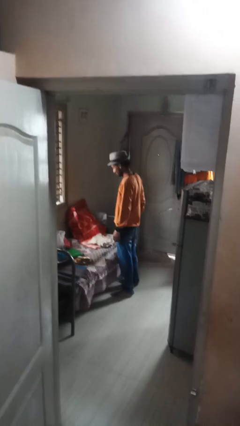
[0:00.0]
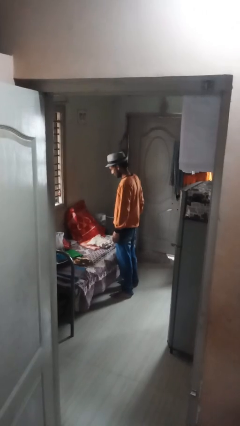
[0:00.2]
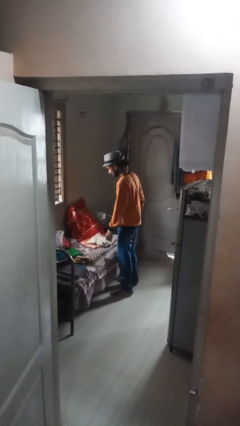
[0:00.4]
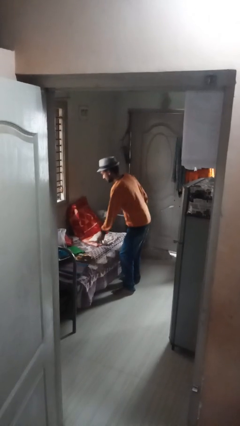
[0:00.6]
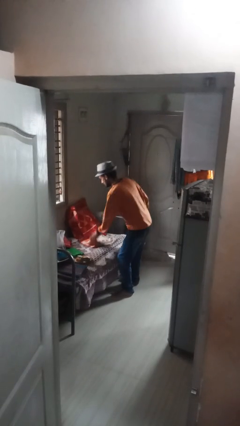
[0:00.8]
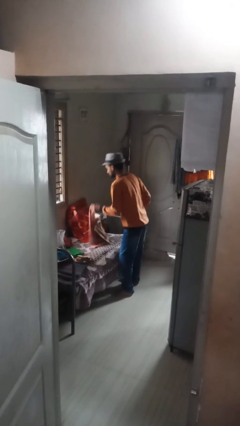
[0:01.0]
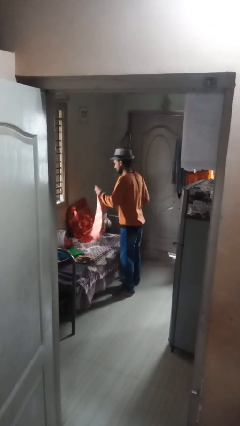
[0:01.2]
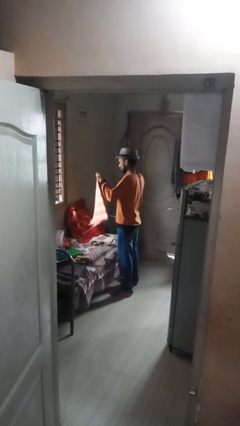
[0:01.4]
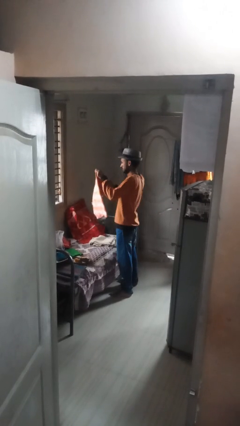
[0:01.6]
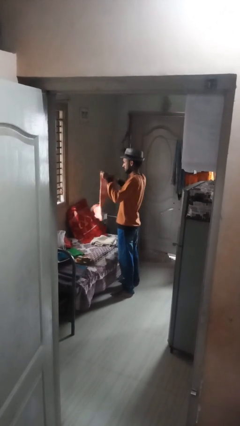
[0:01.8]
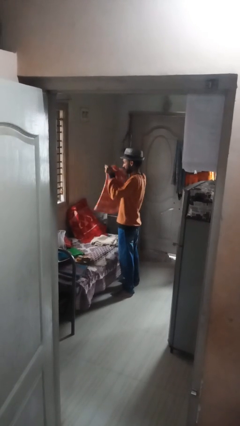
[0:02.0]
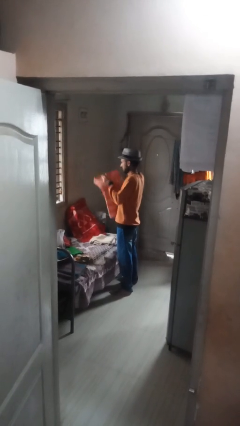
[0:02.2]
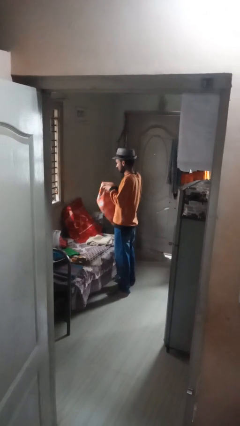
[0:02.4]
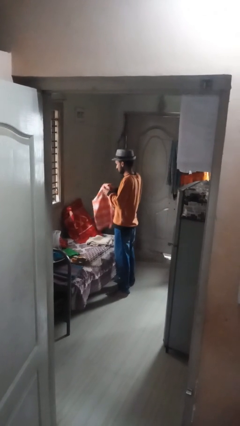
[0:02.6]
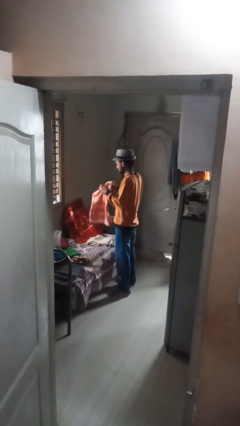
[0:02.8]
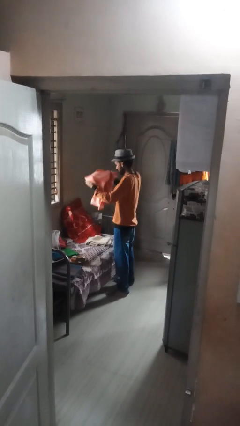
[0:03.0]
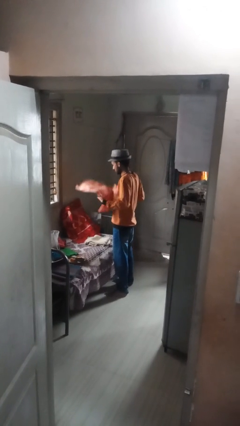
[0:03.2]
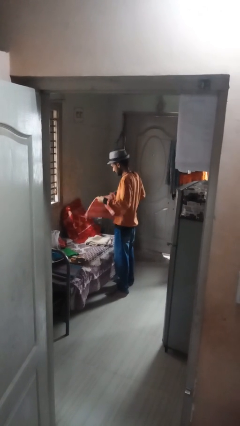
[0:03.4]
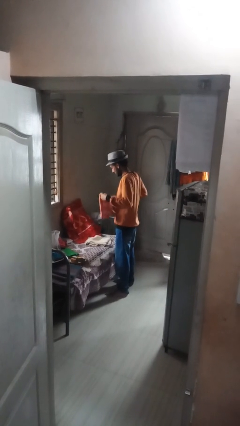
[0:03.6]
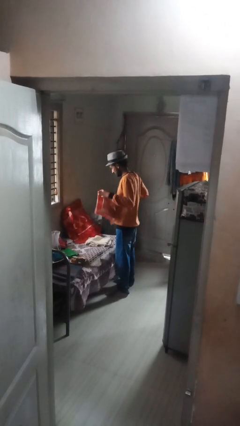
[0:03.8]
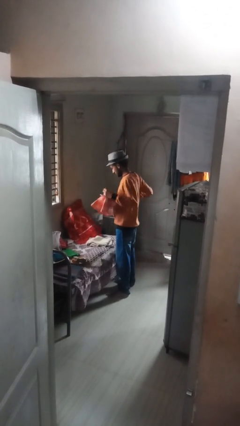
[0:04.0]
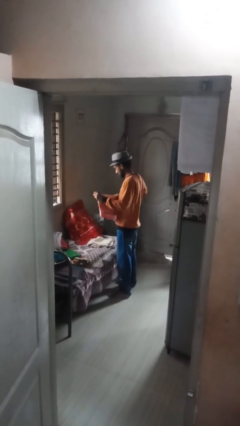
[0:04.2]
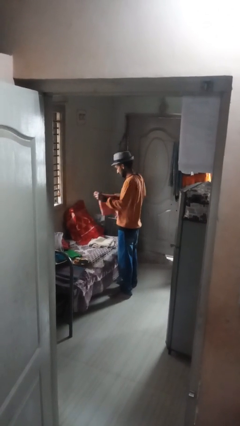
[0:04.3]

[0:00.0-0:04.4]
person folds towel

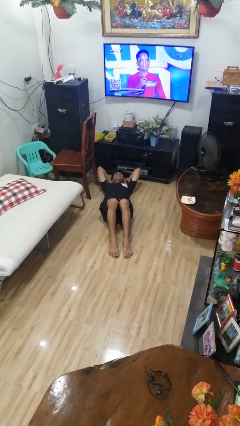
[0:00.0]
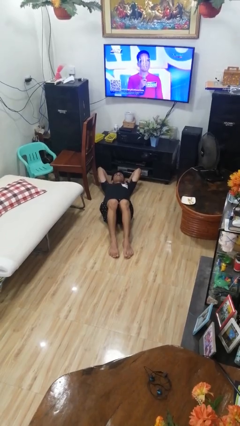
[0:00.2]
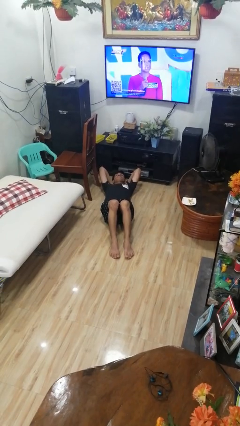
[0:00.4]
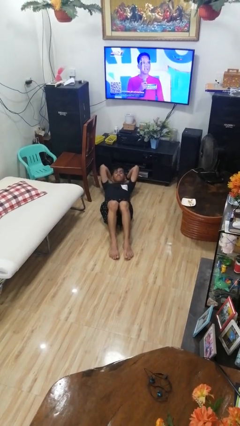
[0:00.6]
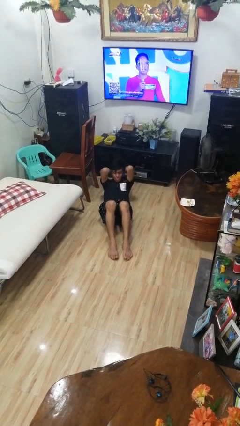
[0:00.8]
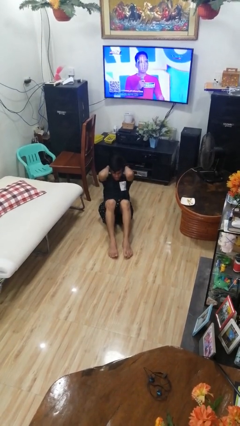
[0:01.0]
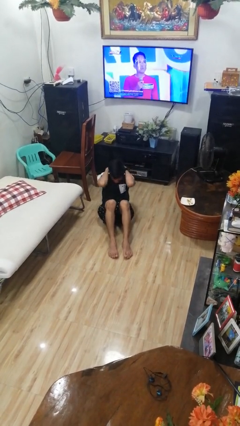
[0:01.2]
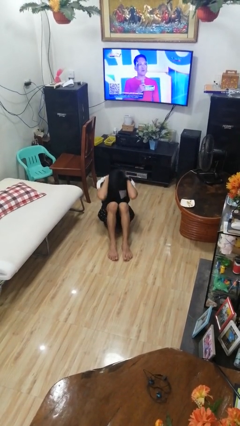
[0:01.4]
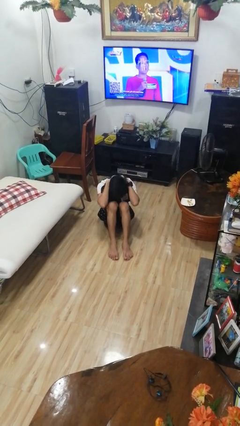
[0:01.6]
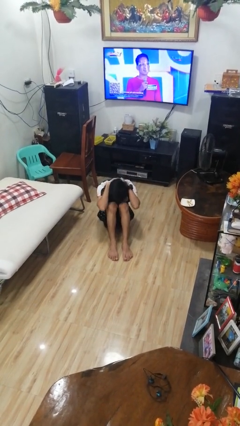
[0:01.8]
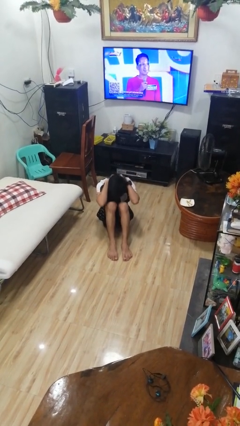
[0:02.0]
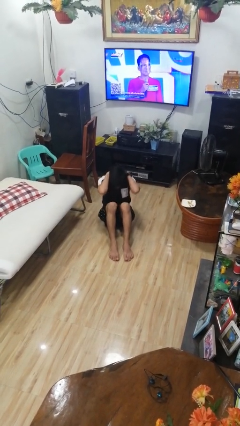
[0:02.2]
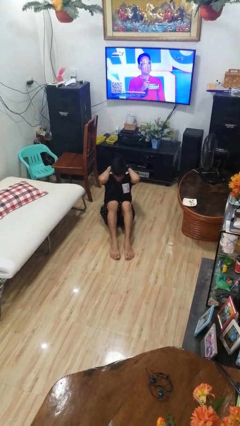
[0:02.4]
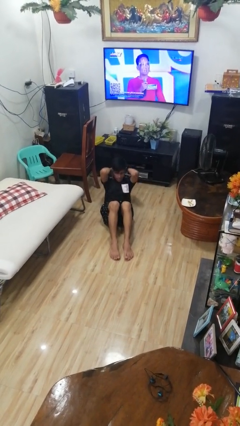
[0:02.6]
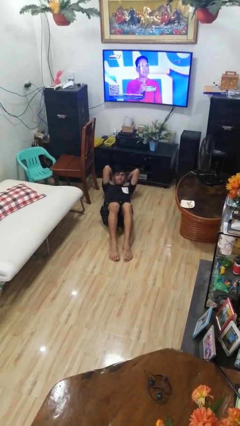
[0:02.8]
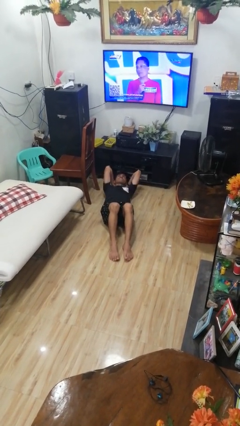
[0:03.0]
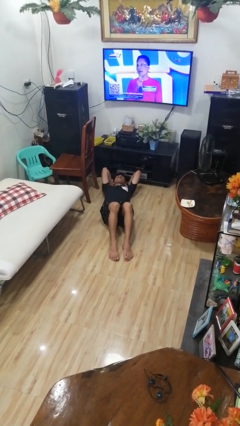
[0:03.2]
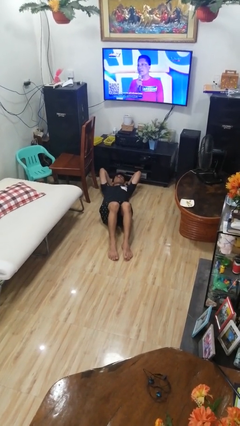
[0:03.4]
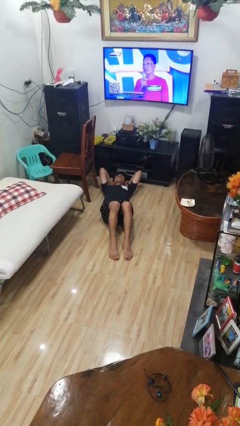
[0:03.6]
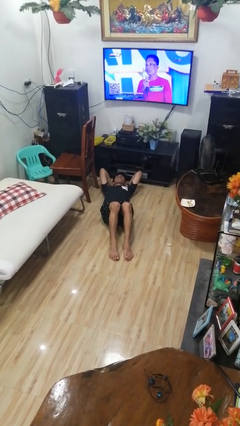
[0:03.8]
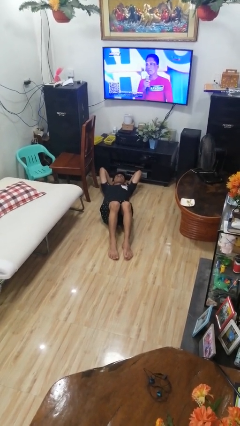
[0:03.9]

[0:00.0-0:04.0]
person exercises with situp

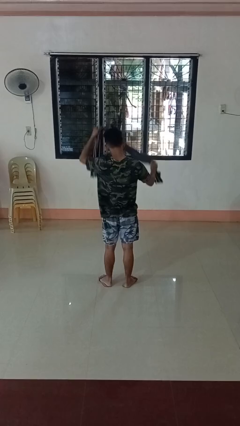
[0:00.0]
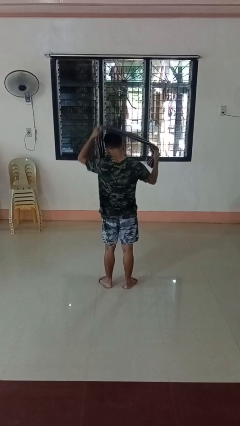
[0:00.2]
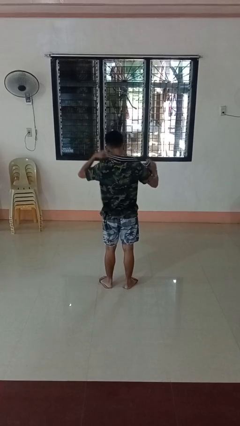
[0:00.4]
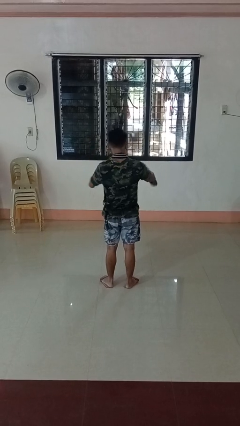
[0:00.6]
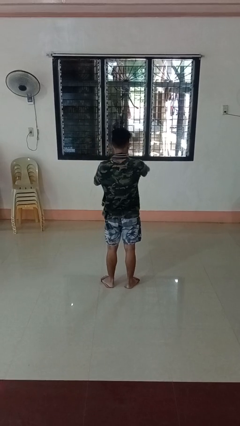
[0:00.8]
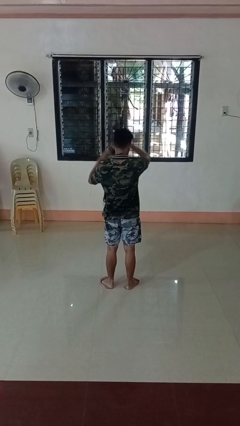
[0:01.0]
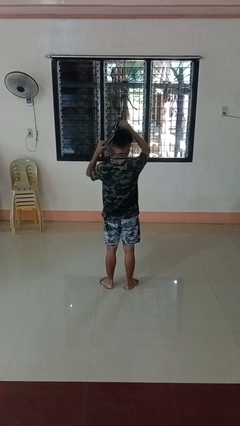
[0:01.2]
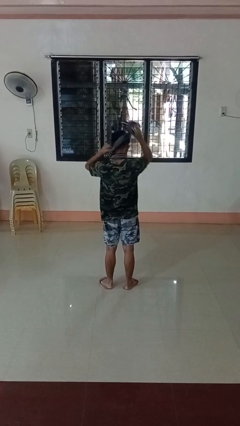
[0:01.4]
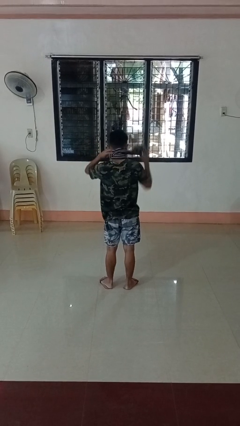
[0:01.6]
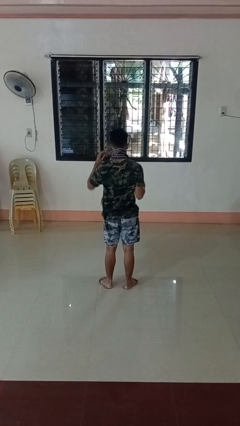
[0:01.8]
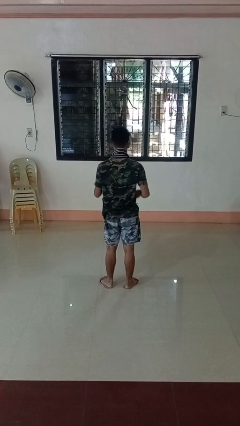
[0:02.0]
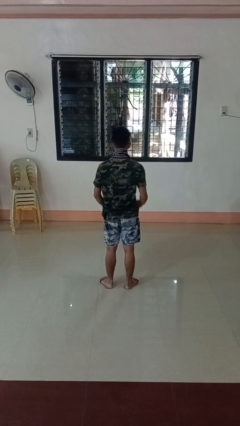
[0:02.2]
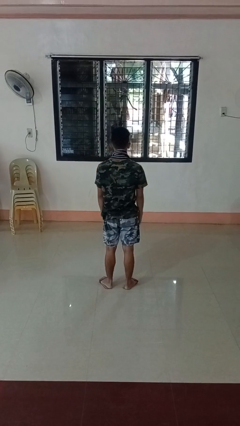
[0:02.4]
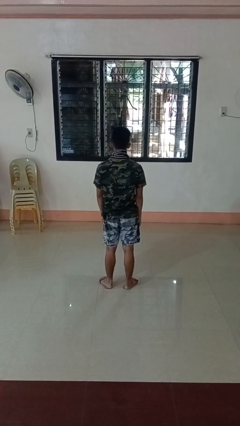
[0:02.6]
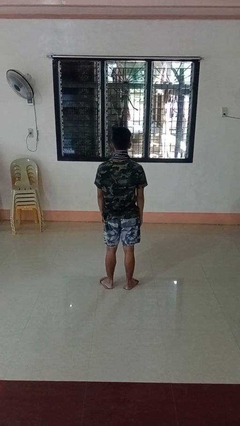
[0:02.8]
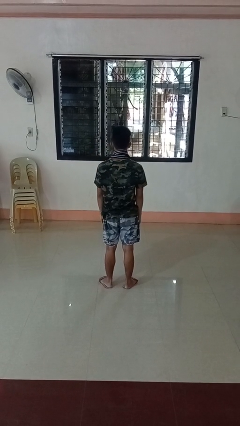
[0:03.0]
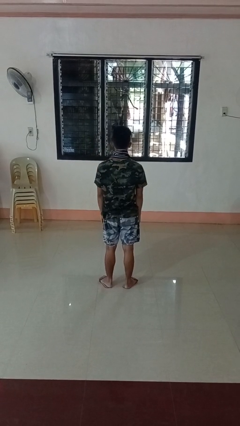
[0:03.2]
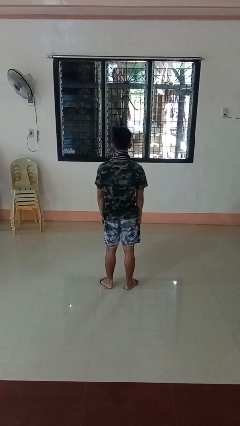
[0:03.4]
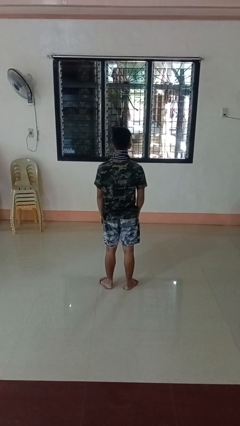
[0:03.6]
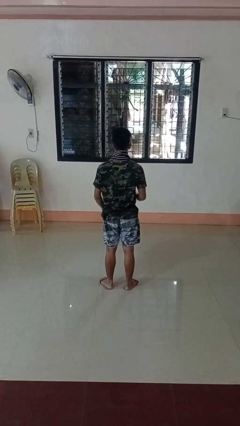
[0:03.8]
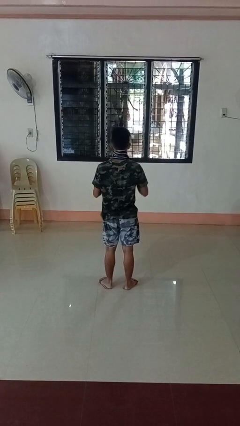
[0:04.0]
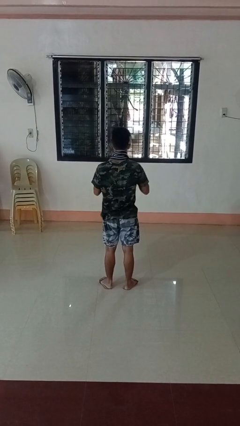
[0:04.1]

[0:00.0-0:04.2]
person puts on scarf

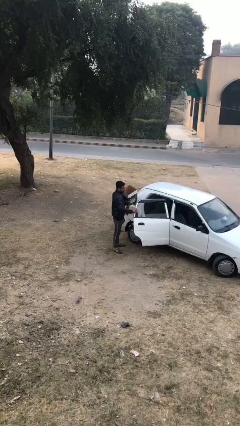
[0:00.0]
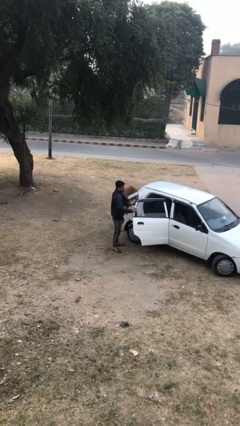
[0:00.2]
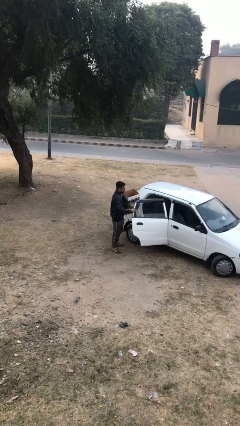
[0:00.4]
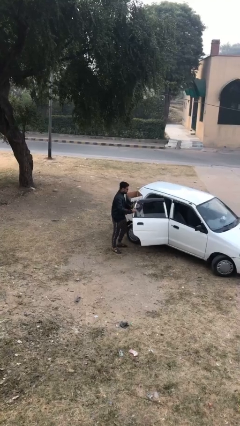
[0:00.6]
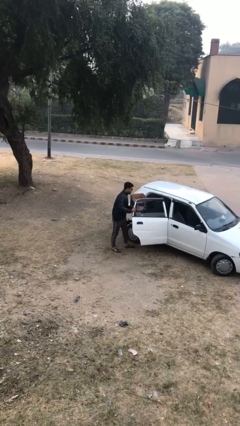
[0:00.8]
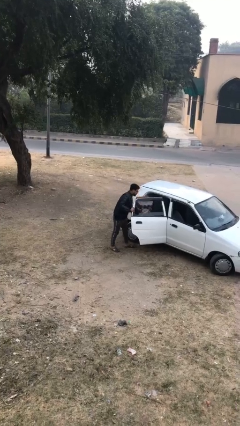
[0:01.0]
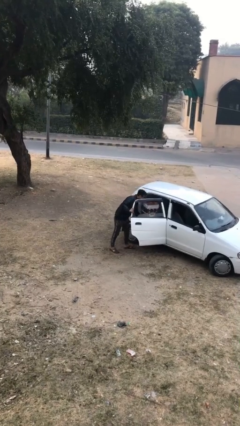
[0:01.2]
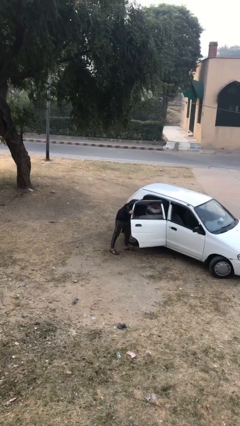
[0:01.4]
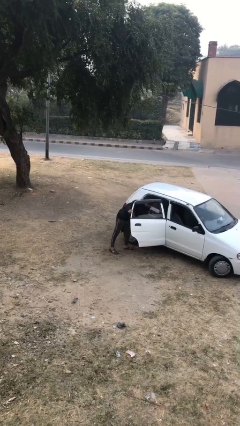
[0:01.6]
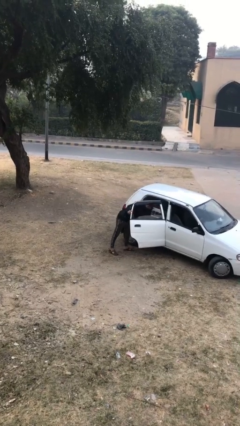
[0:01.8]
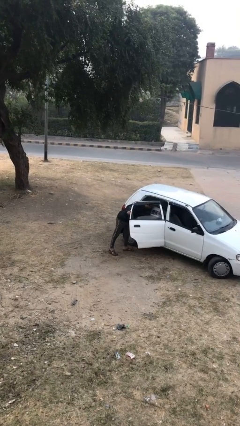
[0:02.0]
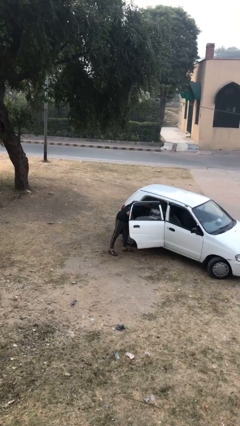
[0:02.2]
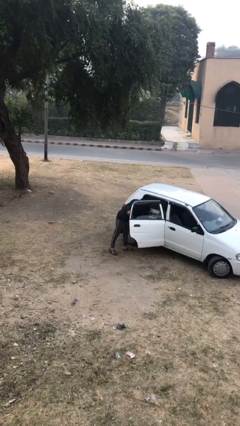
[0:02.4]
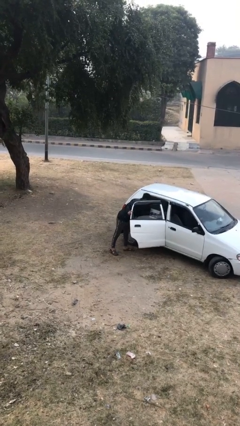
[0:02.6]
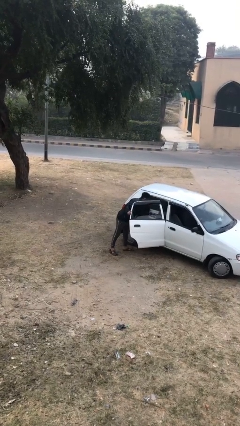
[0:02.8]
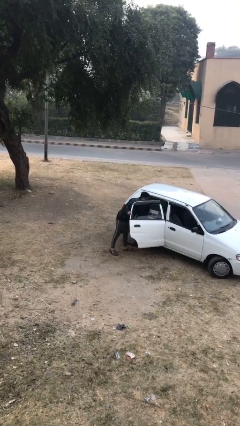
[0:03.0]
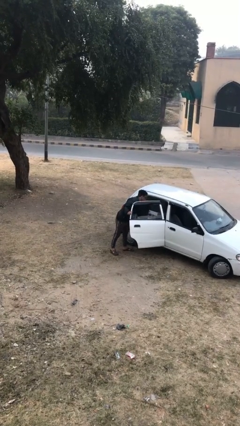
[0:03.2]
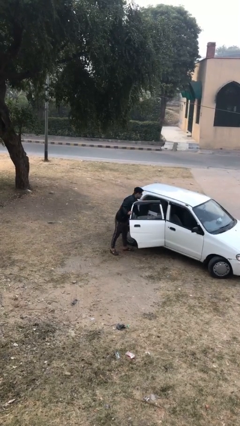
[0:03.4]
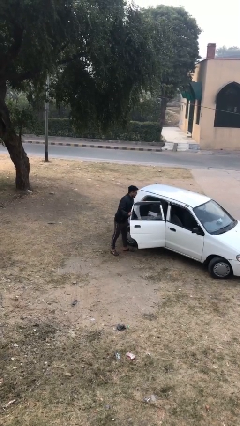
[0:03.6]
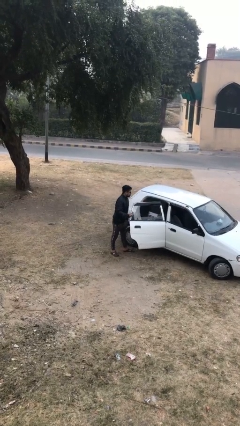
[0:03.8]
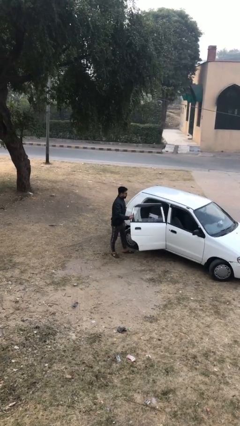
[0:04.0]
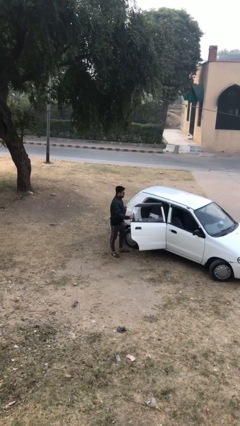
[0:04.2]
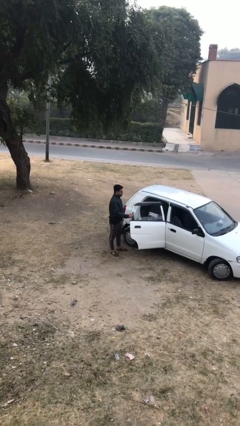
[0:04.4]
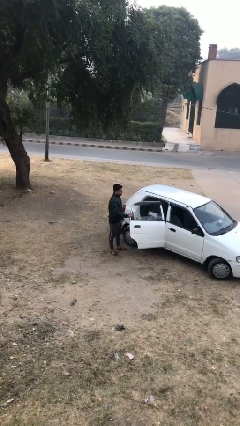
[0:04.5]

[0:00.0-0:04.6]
person loads car

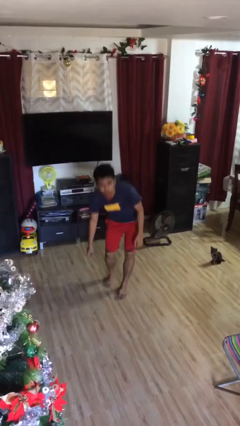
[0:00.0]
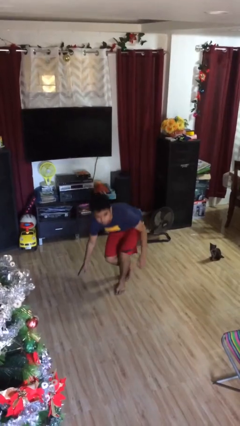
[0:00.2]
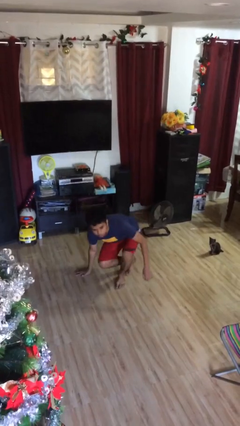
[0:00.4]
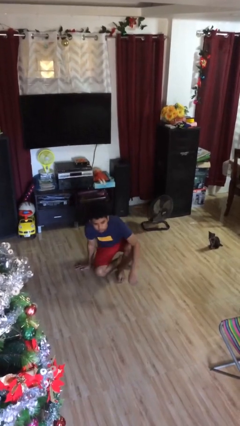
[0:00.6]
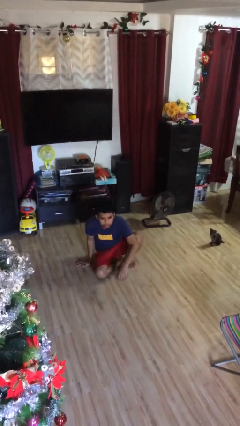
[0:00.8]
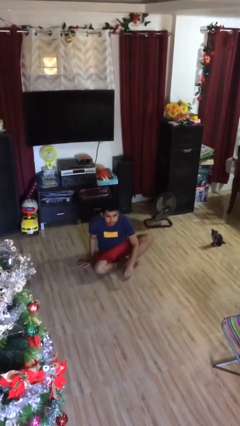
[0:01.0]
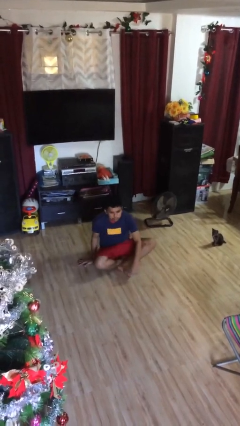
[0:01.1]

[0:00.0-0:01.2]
person sits down
